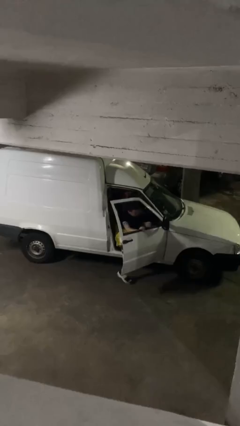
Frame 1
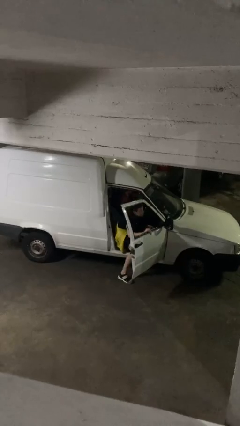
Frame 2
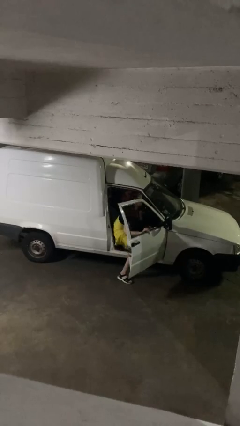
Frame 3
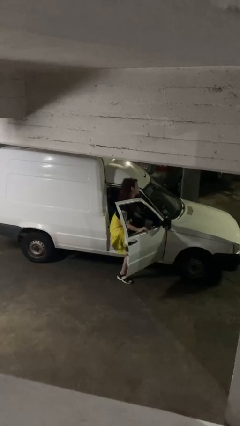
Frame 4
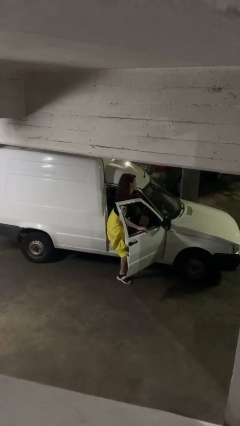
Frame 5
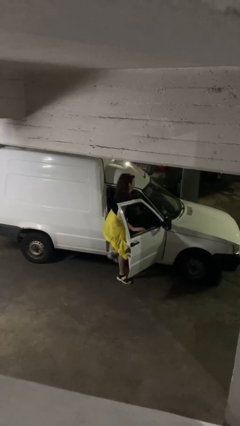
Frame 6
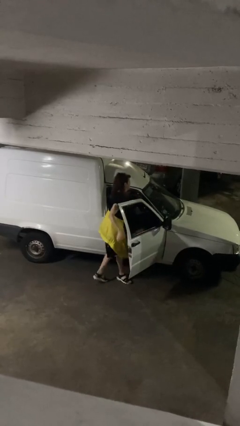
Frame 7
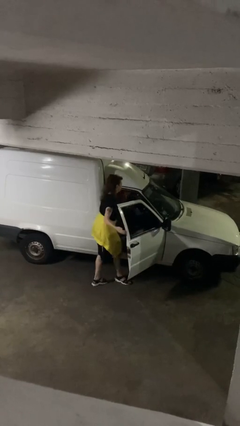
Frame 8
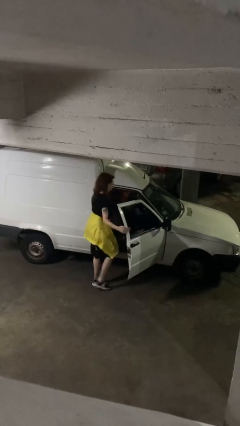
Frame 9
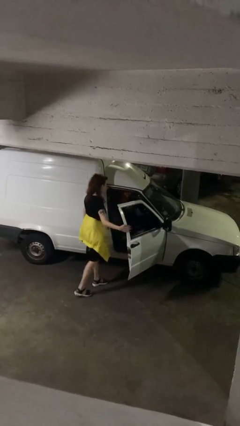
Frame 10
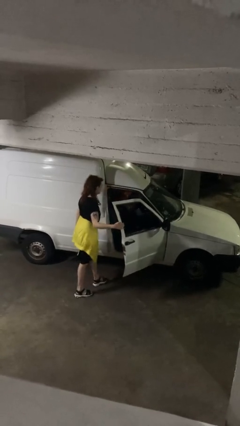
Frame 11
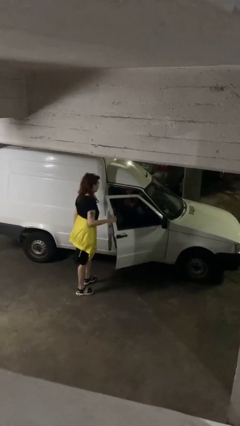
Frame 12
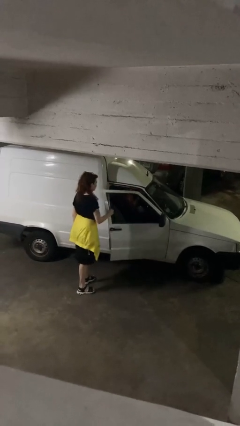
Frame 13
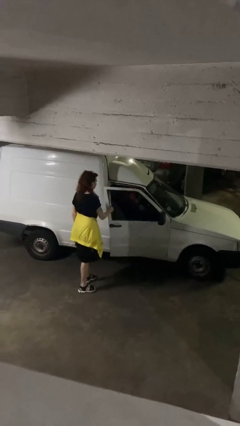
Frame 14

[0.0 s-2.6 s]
car drops off person

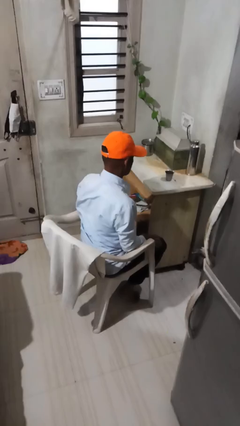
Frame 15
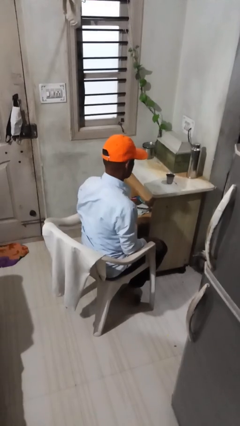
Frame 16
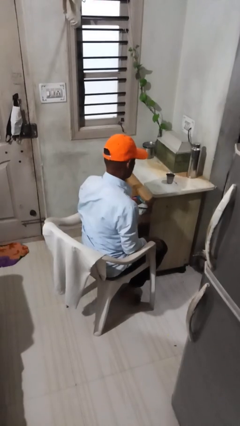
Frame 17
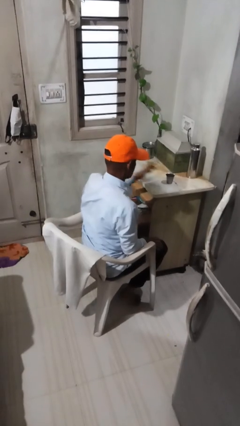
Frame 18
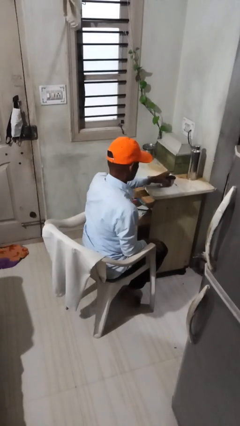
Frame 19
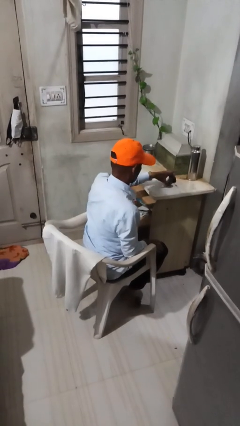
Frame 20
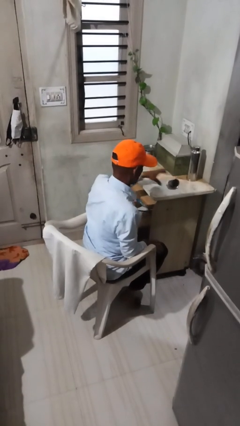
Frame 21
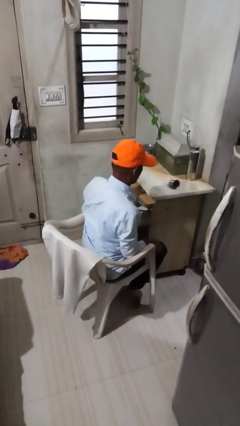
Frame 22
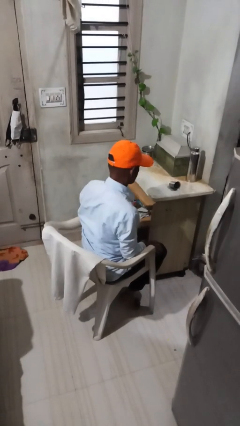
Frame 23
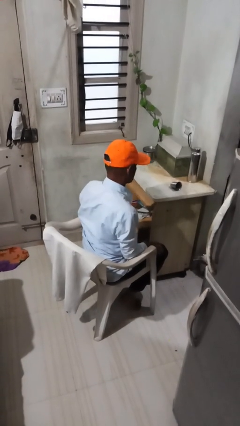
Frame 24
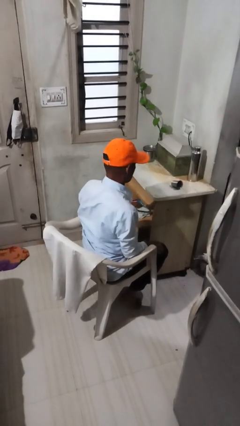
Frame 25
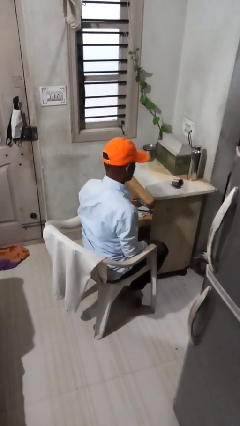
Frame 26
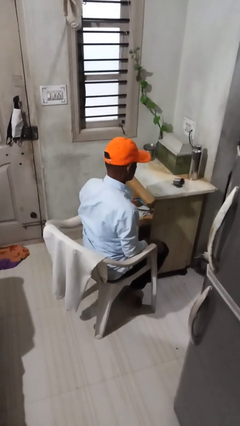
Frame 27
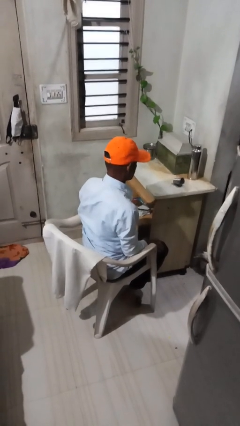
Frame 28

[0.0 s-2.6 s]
person knocks over glass

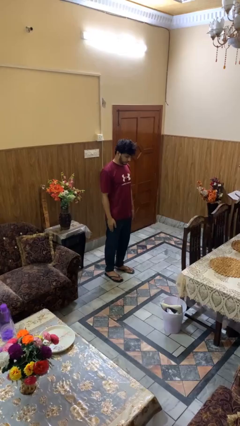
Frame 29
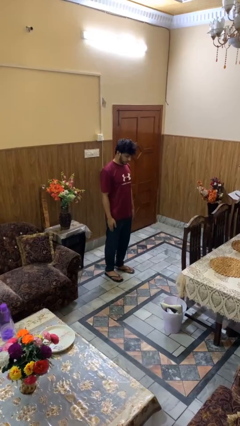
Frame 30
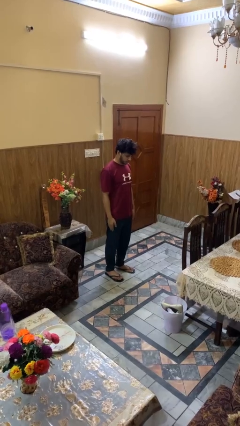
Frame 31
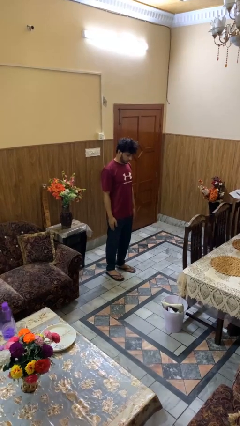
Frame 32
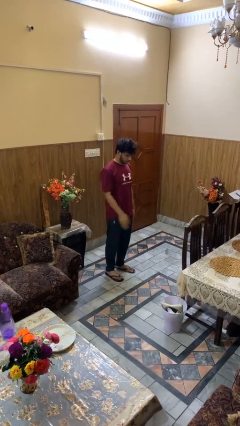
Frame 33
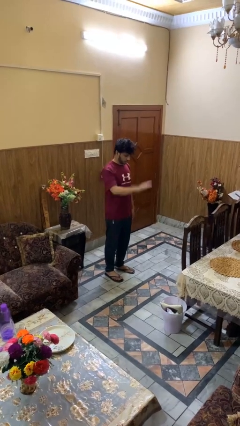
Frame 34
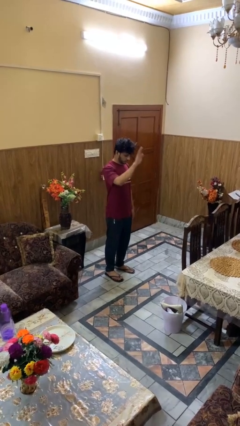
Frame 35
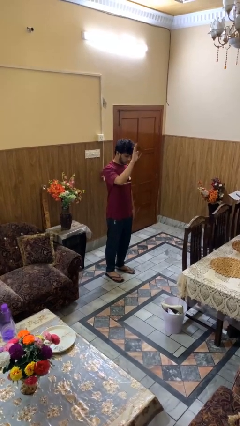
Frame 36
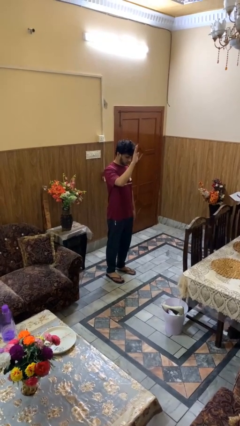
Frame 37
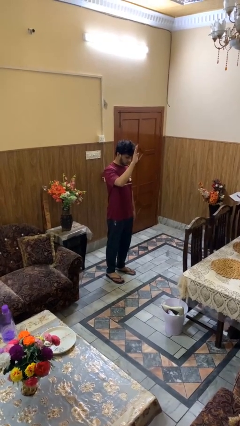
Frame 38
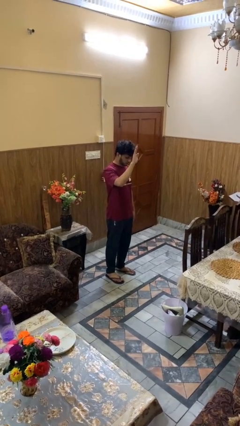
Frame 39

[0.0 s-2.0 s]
person gestures raise hand

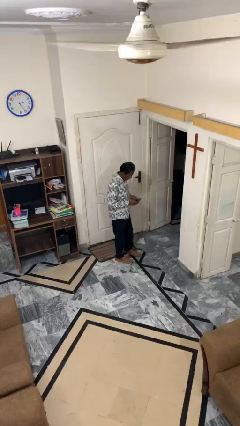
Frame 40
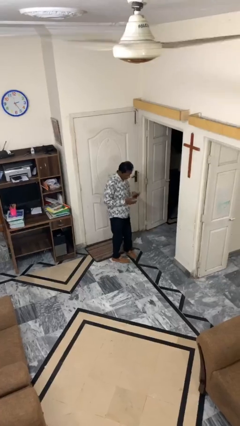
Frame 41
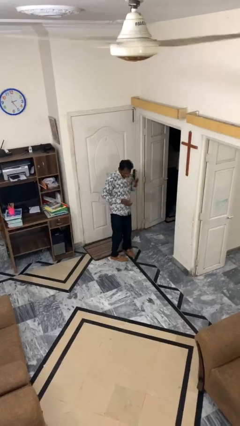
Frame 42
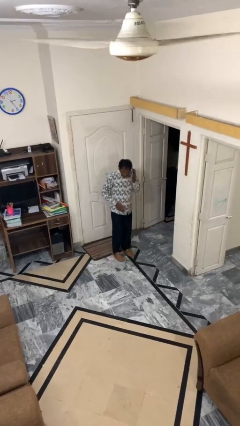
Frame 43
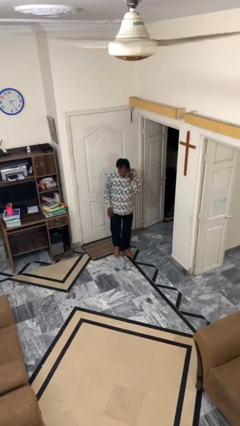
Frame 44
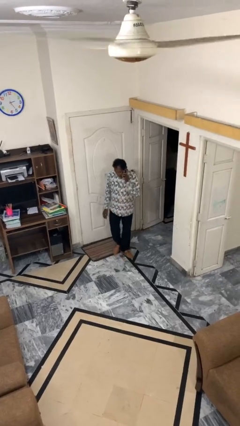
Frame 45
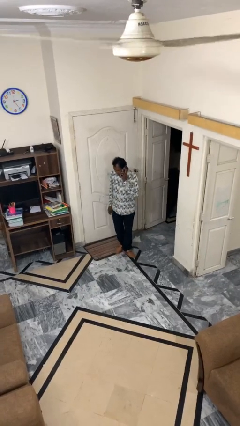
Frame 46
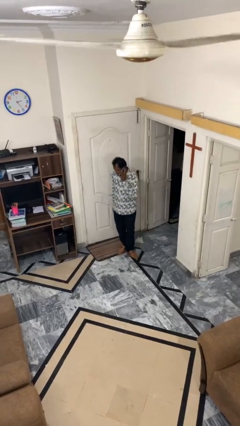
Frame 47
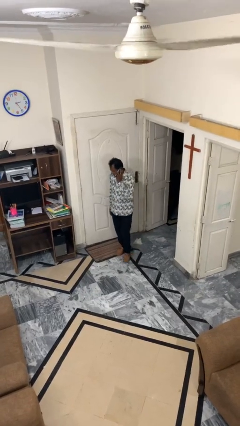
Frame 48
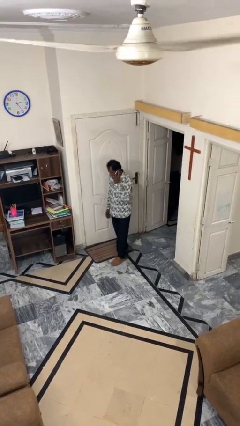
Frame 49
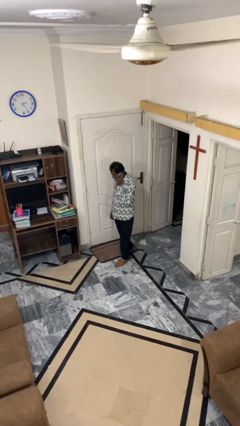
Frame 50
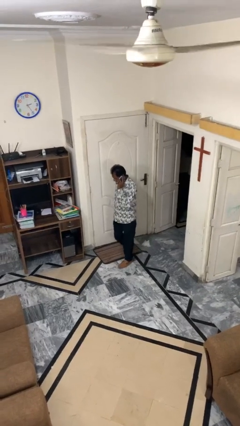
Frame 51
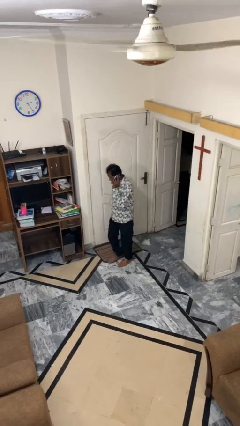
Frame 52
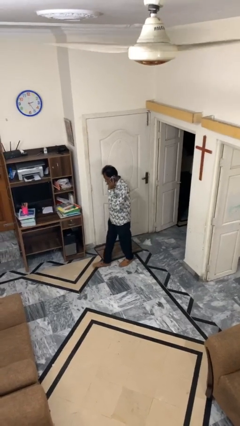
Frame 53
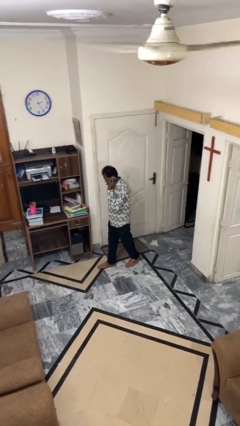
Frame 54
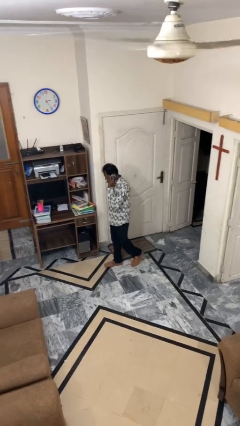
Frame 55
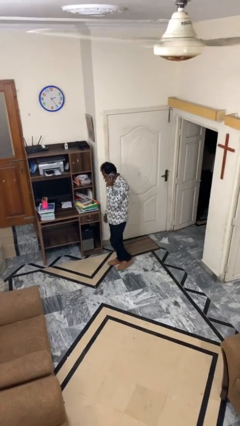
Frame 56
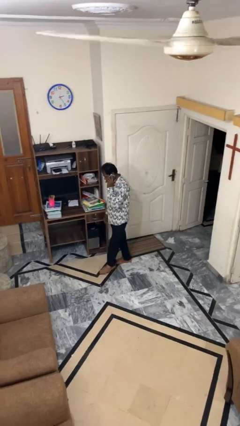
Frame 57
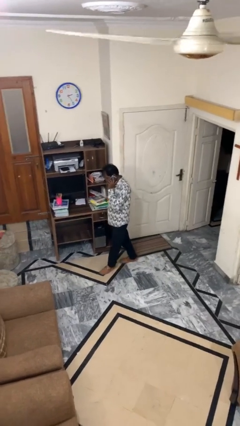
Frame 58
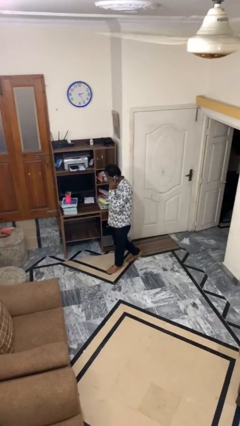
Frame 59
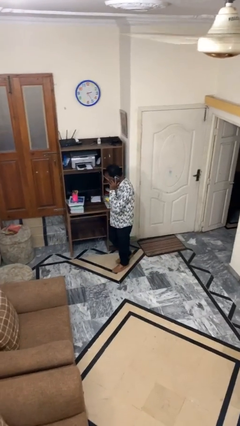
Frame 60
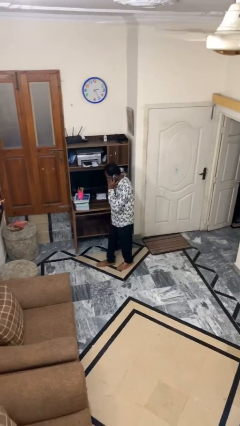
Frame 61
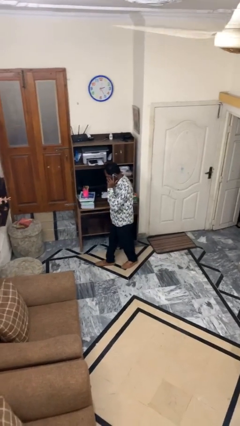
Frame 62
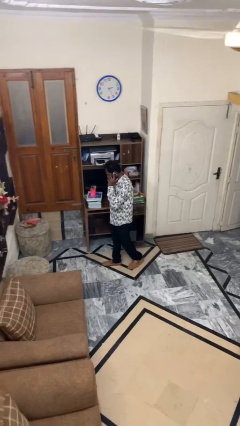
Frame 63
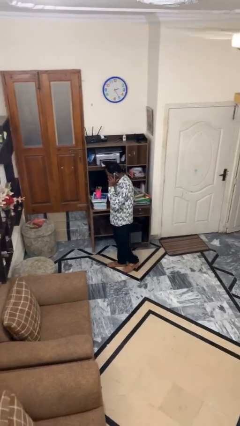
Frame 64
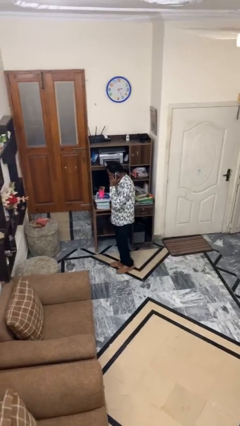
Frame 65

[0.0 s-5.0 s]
person talks on phone

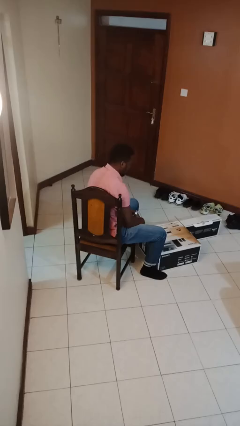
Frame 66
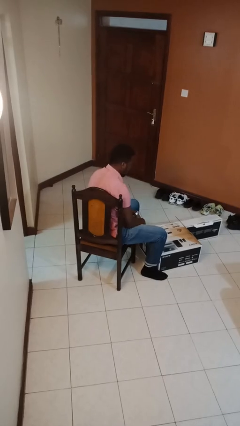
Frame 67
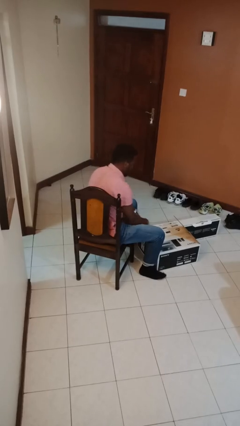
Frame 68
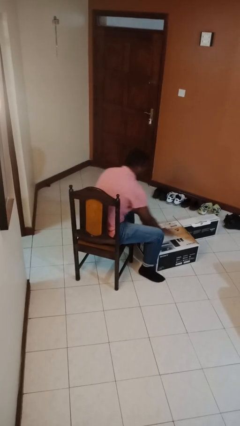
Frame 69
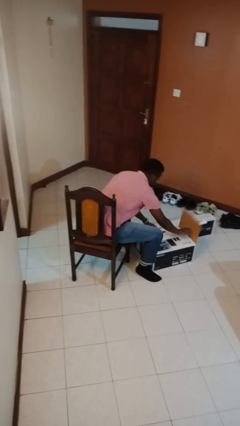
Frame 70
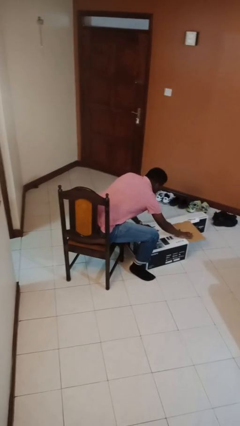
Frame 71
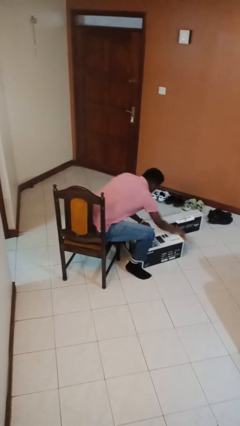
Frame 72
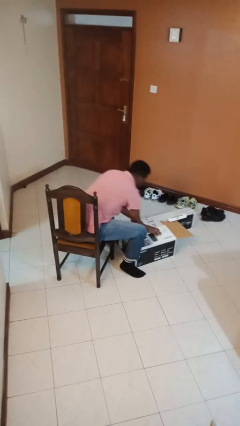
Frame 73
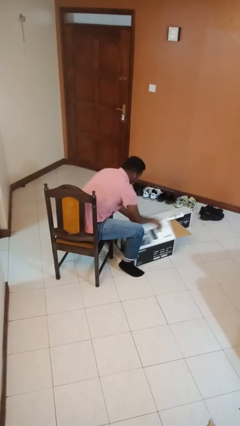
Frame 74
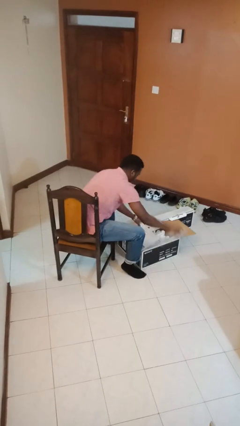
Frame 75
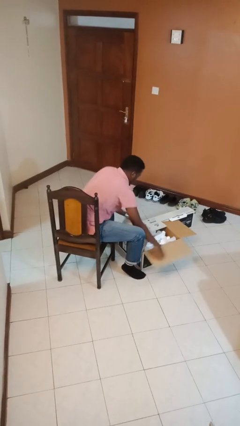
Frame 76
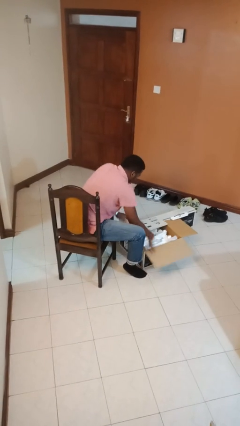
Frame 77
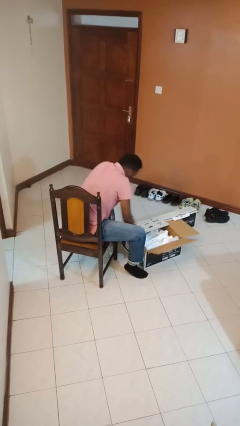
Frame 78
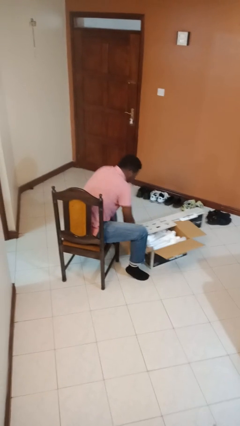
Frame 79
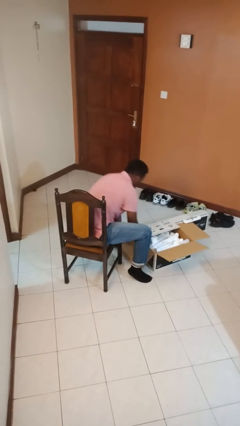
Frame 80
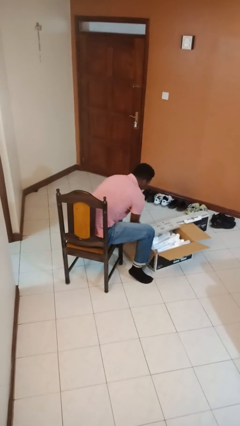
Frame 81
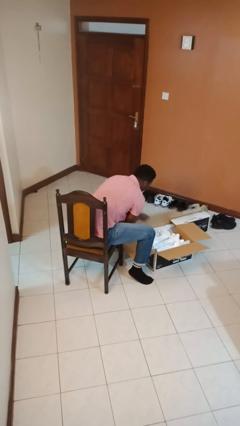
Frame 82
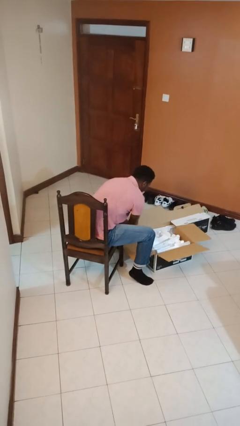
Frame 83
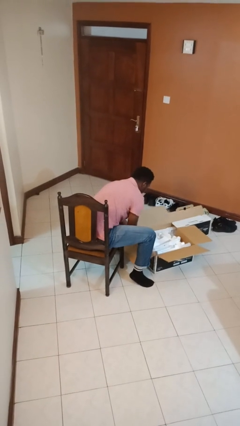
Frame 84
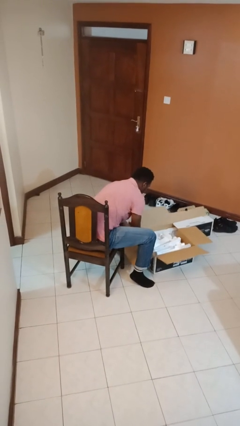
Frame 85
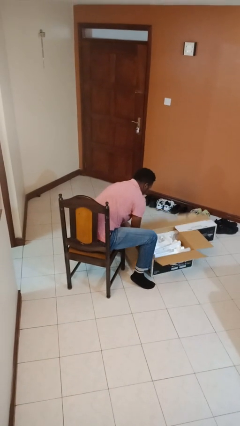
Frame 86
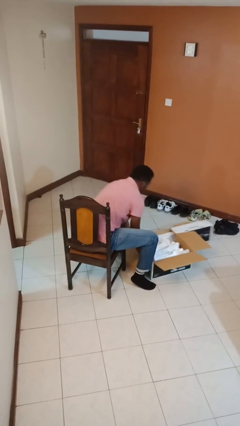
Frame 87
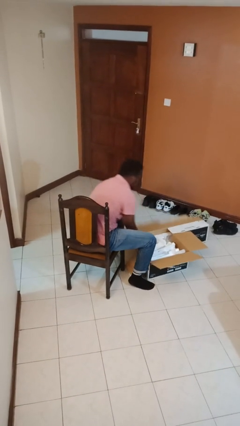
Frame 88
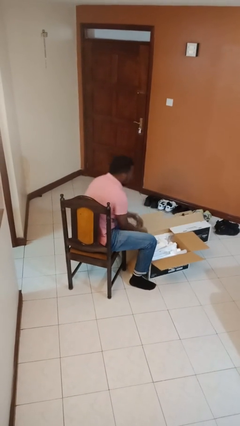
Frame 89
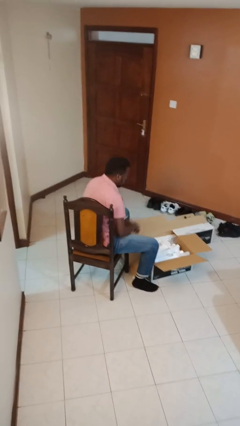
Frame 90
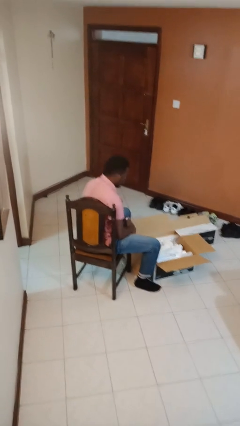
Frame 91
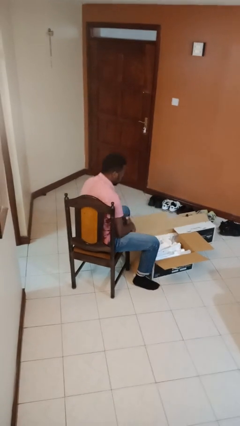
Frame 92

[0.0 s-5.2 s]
person opens box

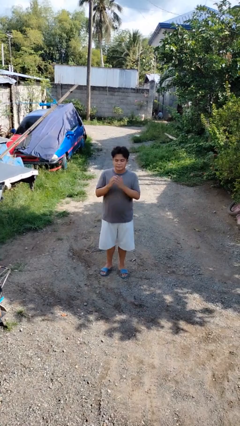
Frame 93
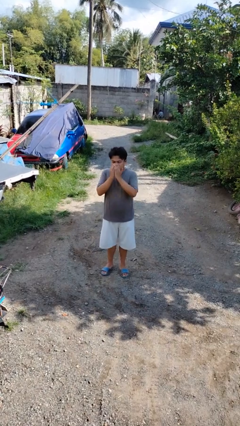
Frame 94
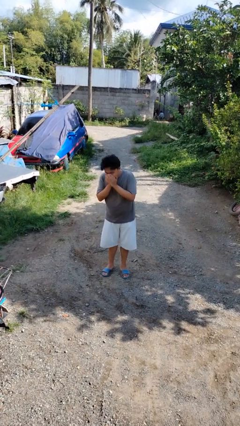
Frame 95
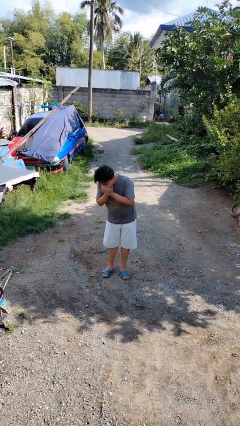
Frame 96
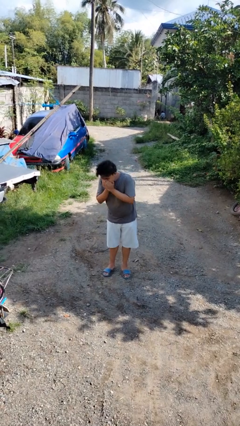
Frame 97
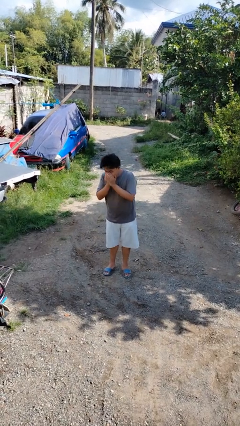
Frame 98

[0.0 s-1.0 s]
person sneezes into hand
